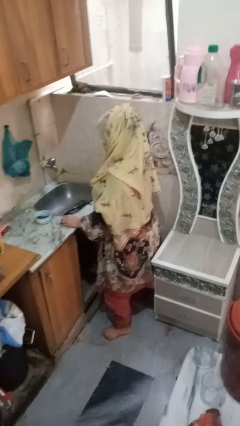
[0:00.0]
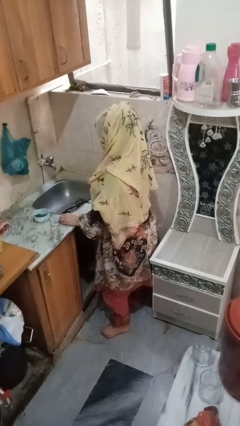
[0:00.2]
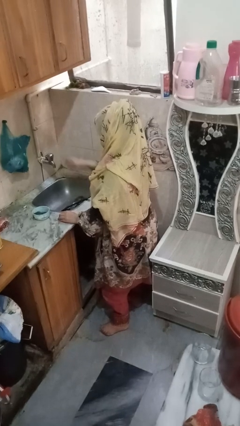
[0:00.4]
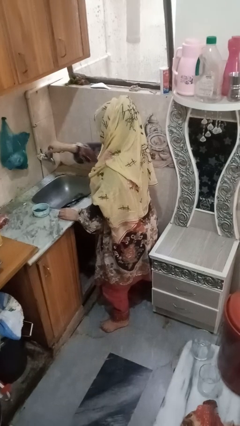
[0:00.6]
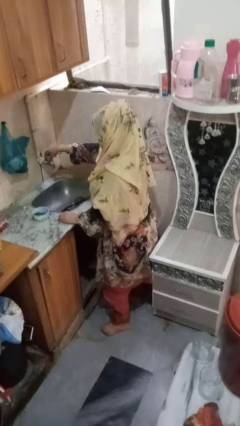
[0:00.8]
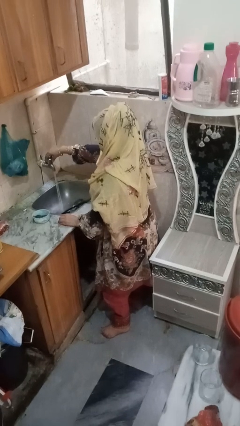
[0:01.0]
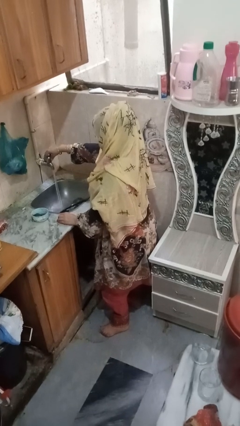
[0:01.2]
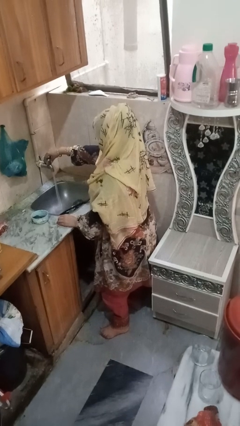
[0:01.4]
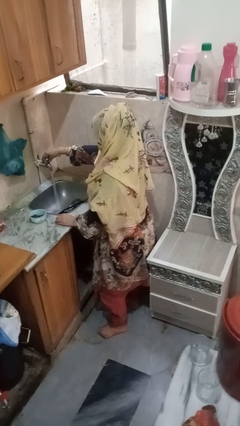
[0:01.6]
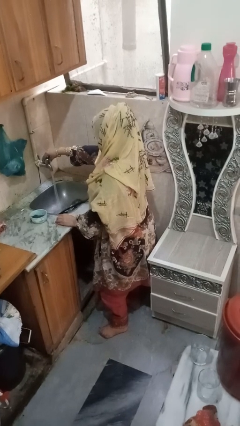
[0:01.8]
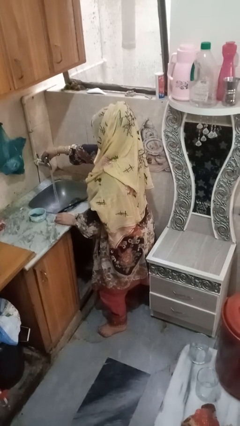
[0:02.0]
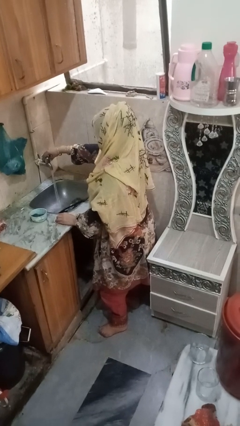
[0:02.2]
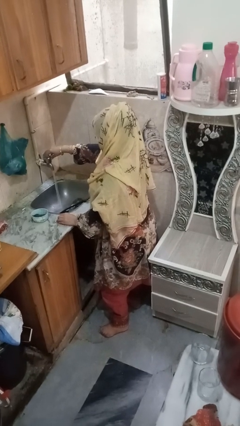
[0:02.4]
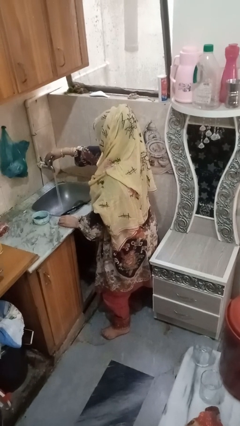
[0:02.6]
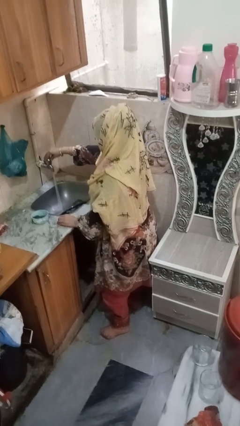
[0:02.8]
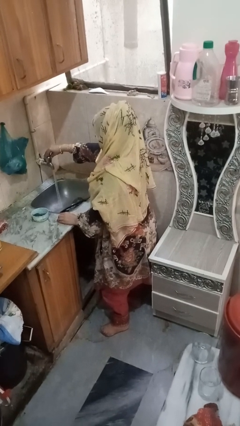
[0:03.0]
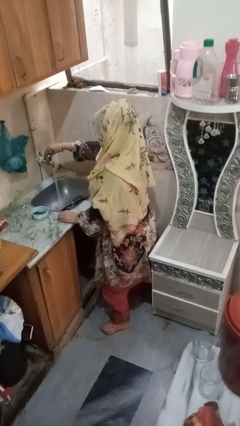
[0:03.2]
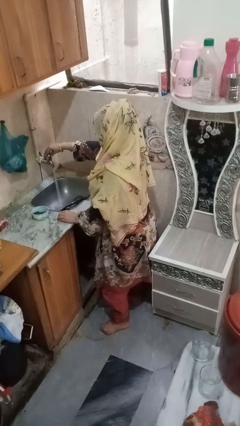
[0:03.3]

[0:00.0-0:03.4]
person turns on faucet

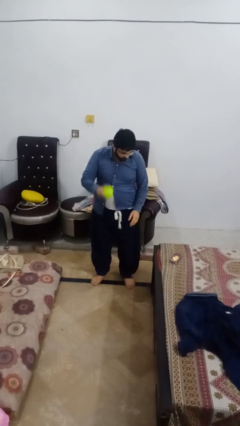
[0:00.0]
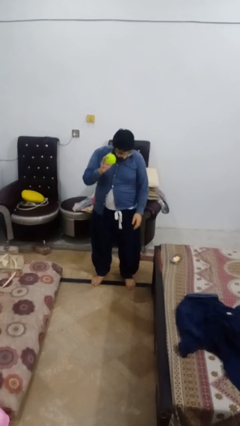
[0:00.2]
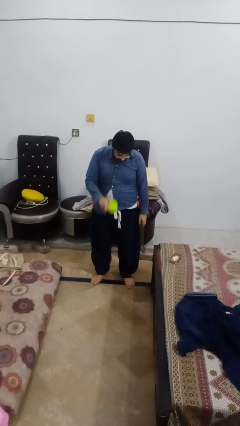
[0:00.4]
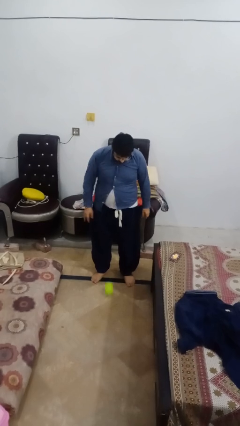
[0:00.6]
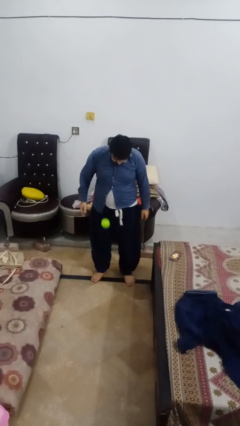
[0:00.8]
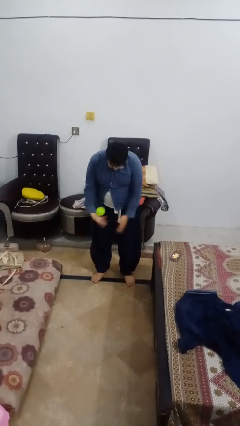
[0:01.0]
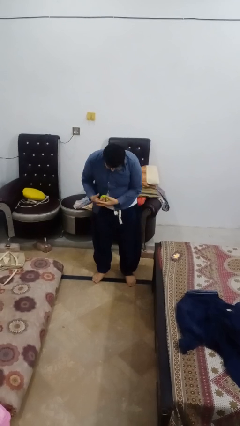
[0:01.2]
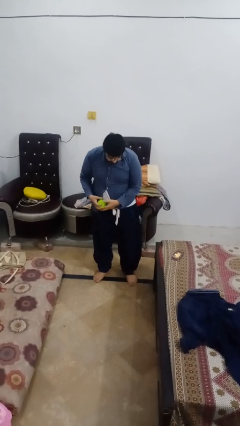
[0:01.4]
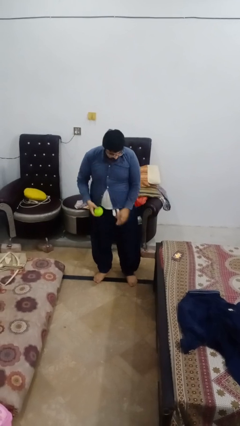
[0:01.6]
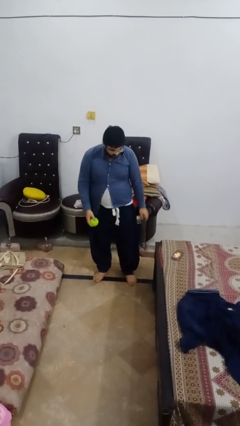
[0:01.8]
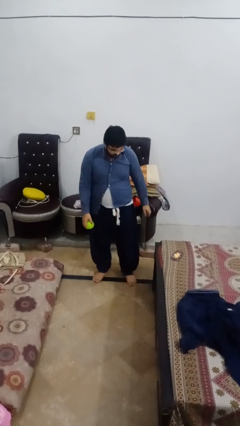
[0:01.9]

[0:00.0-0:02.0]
person bounces ball on floor

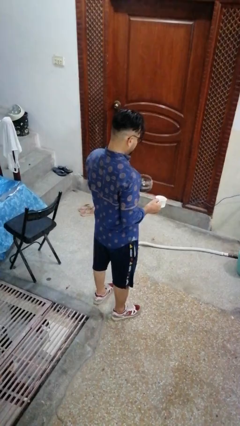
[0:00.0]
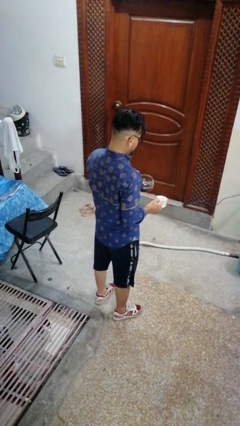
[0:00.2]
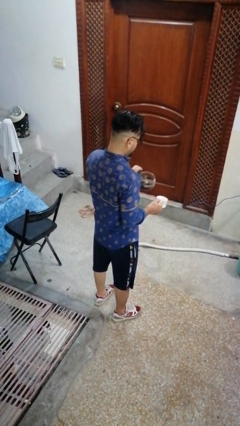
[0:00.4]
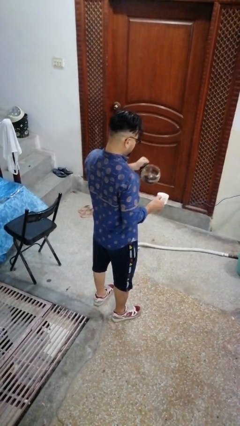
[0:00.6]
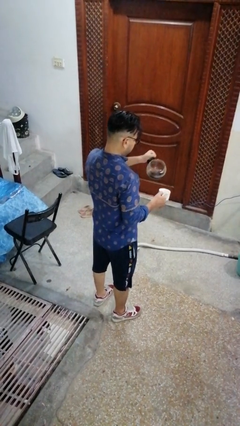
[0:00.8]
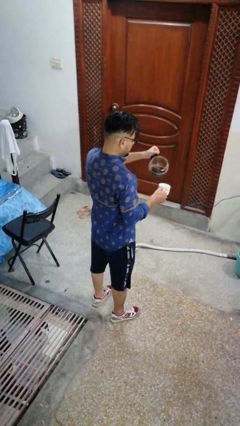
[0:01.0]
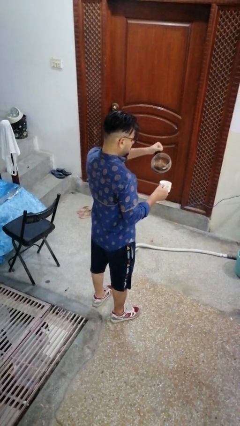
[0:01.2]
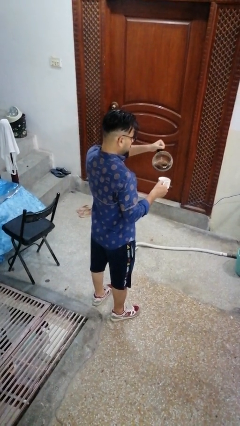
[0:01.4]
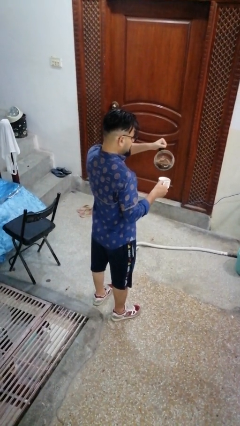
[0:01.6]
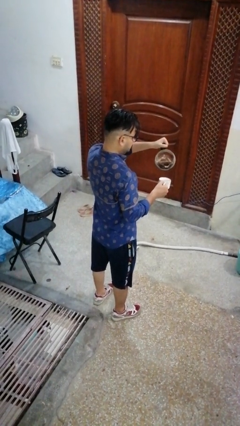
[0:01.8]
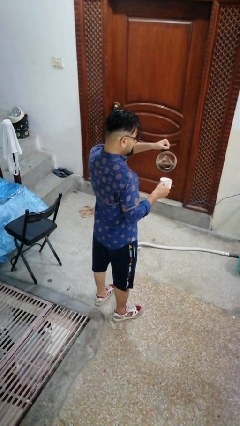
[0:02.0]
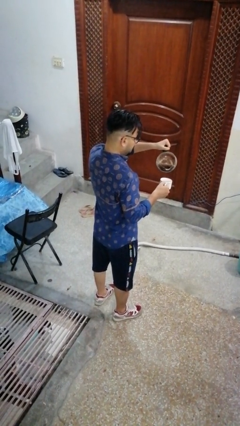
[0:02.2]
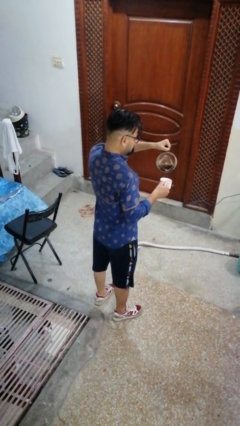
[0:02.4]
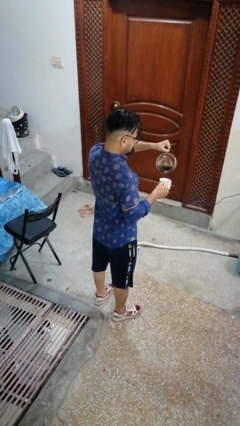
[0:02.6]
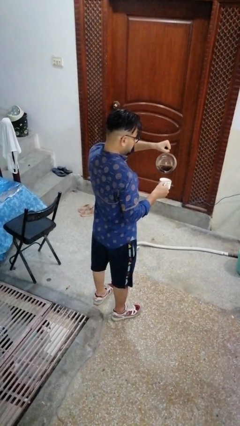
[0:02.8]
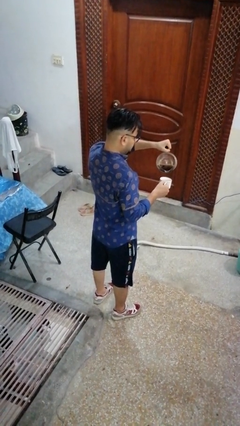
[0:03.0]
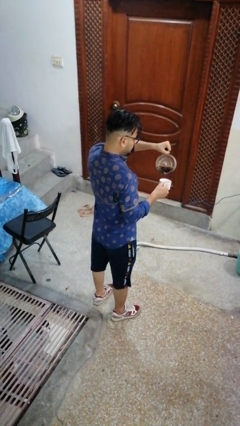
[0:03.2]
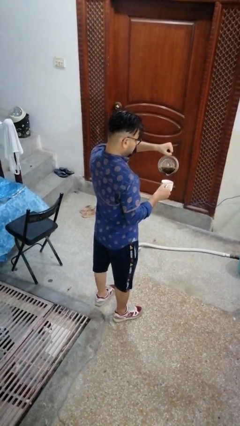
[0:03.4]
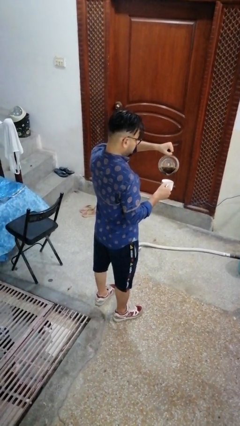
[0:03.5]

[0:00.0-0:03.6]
person pours coffee into mug

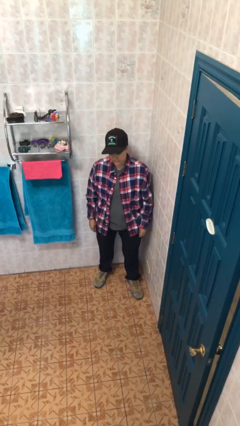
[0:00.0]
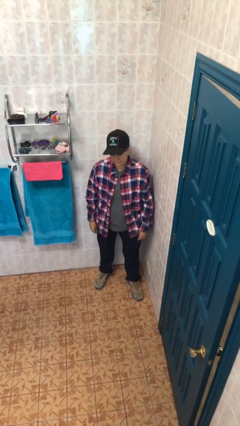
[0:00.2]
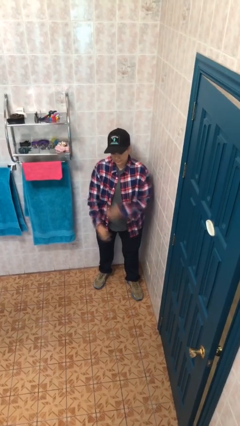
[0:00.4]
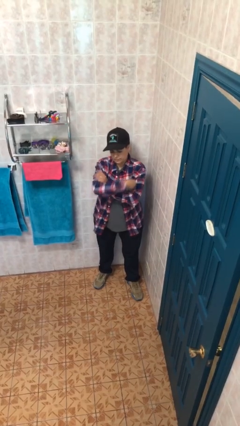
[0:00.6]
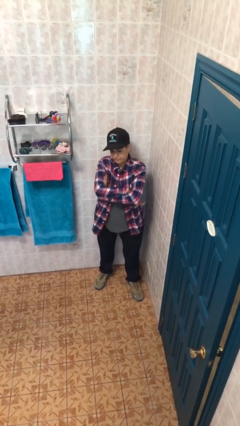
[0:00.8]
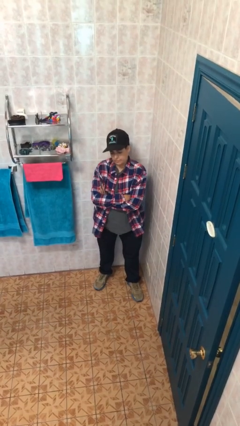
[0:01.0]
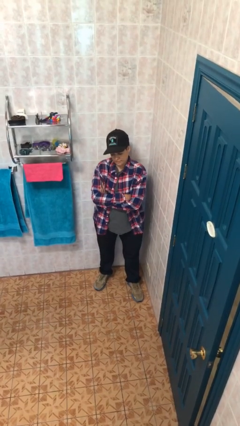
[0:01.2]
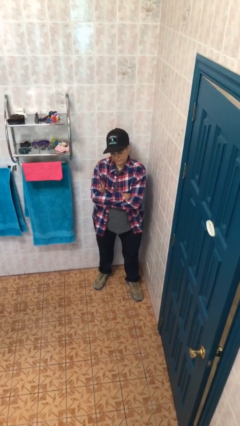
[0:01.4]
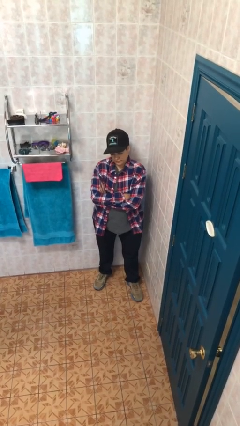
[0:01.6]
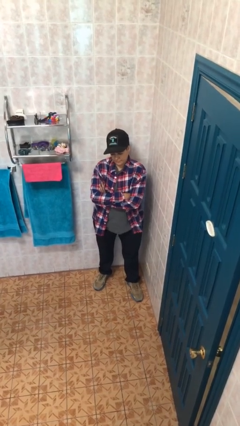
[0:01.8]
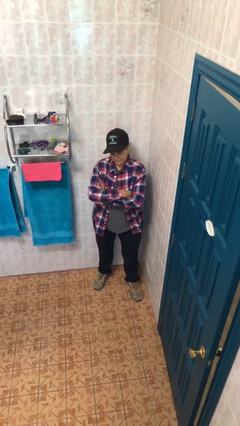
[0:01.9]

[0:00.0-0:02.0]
person crosses arms

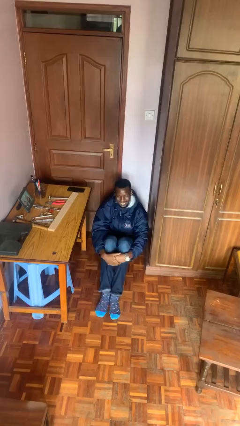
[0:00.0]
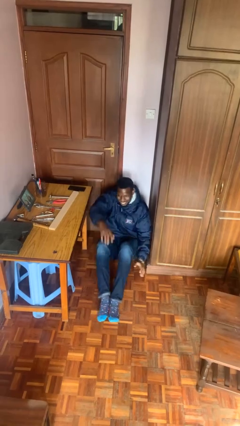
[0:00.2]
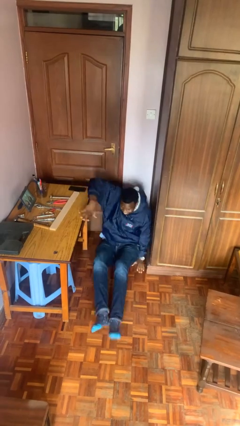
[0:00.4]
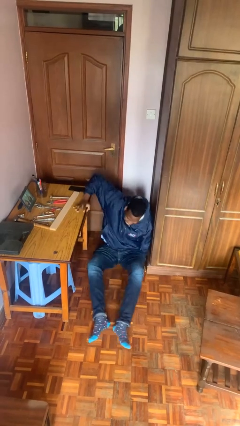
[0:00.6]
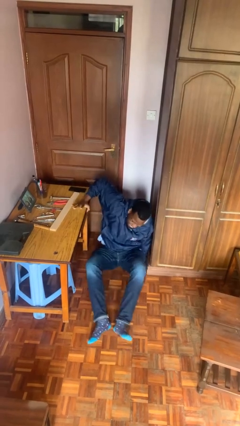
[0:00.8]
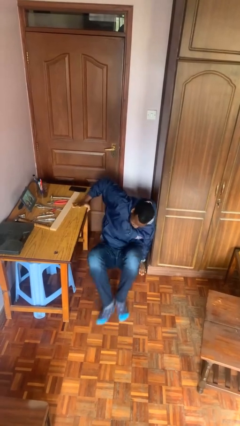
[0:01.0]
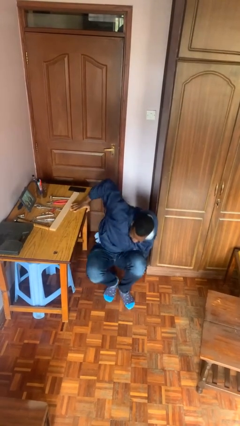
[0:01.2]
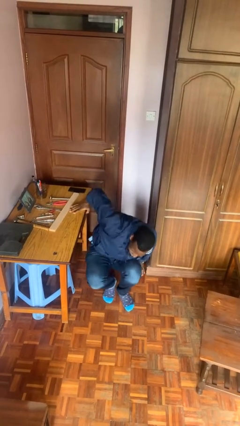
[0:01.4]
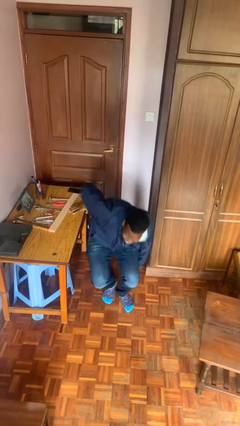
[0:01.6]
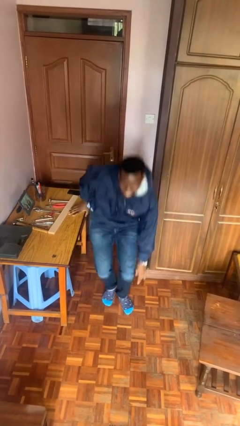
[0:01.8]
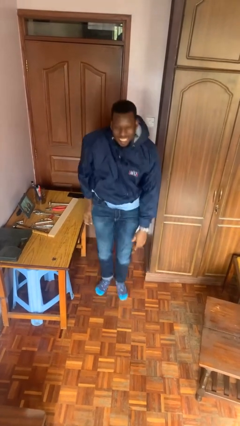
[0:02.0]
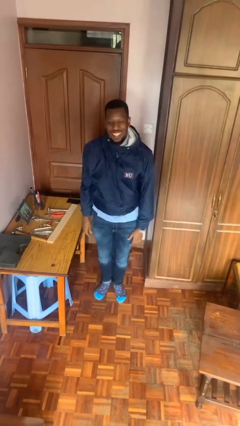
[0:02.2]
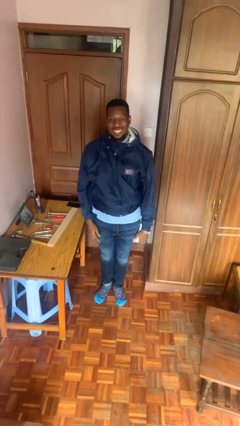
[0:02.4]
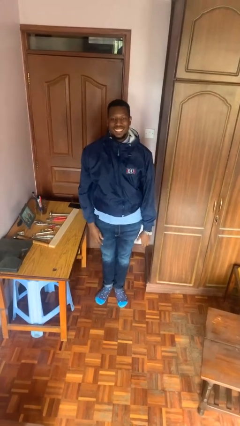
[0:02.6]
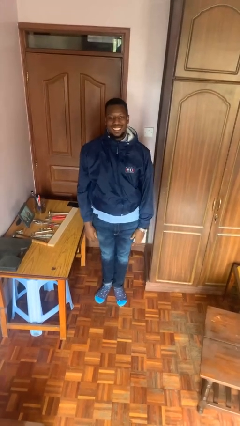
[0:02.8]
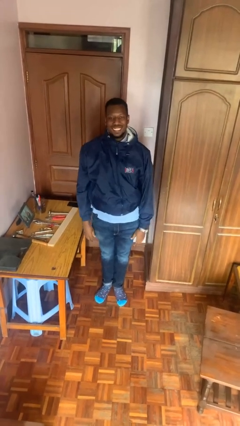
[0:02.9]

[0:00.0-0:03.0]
person stands up

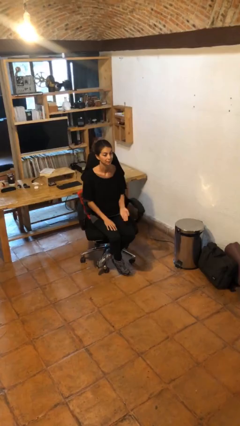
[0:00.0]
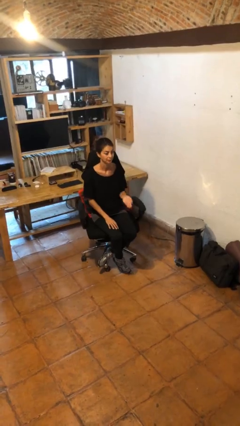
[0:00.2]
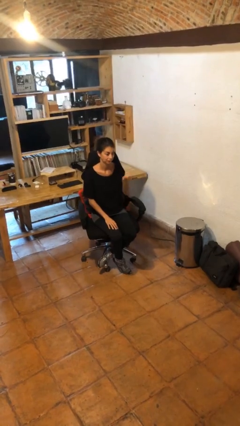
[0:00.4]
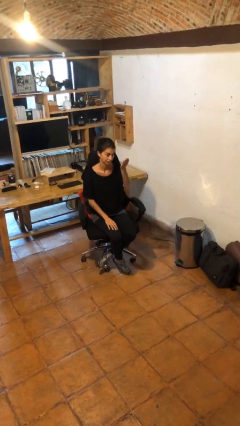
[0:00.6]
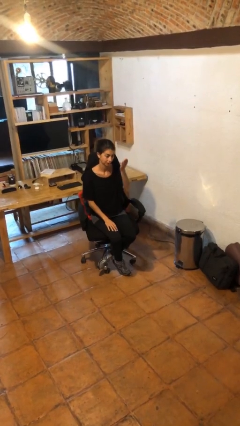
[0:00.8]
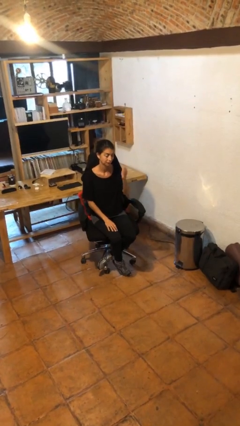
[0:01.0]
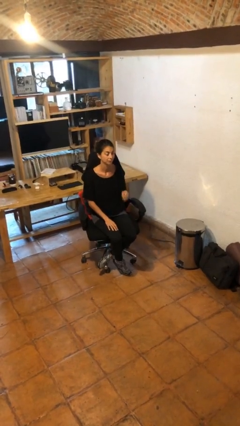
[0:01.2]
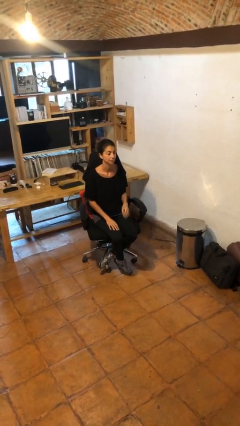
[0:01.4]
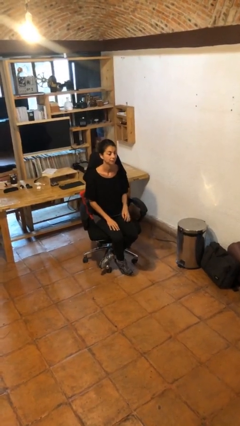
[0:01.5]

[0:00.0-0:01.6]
person gestures swipe up

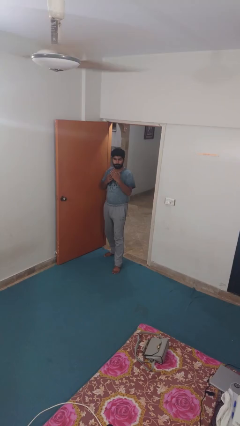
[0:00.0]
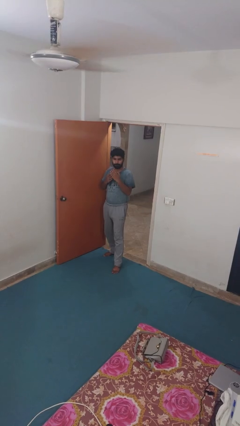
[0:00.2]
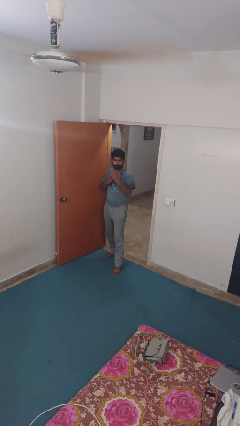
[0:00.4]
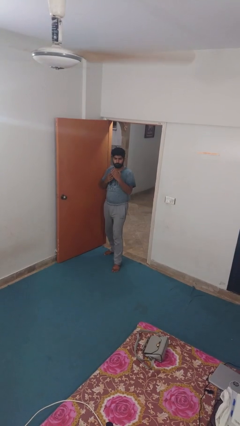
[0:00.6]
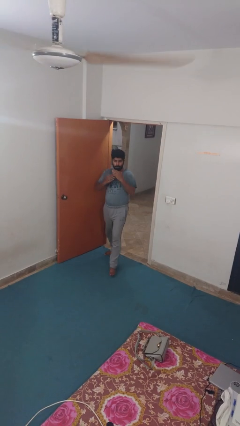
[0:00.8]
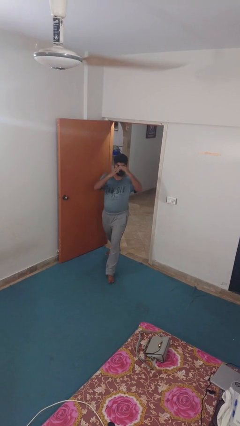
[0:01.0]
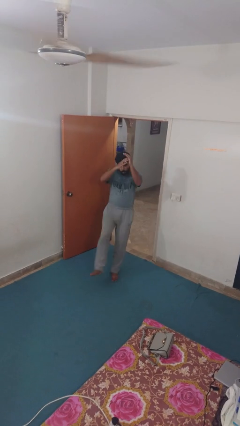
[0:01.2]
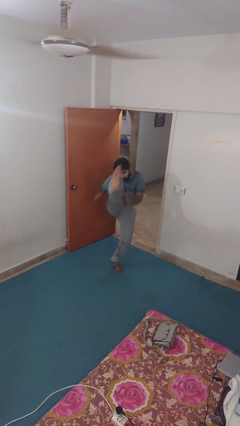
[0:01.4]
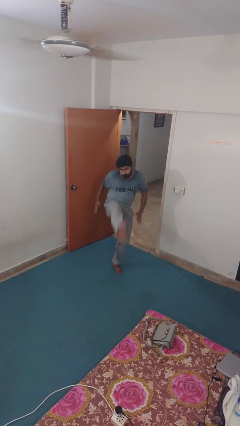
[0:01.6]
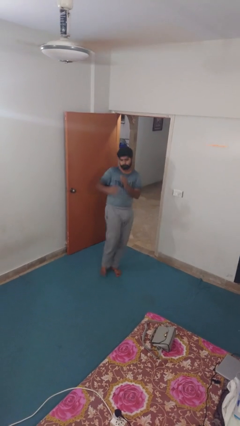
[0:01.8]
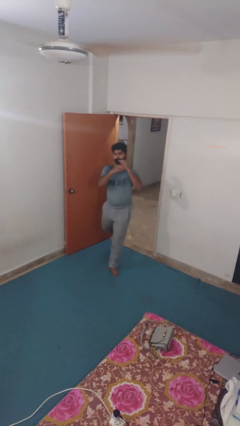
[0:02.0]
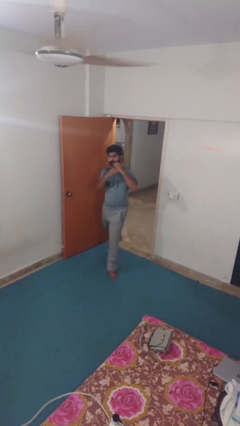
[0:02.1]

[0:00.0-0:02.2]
person karate kicks
